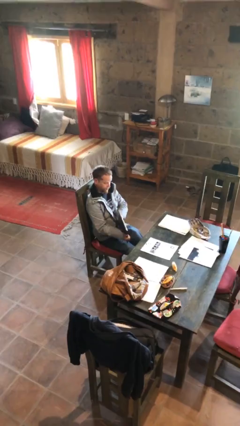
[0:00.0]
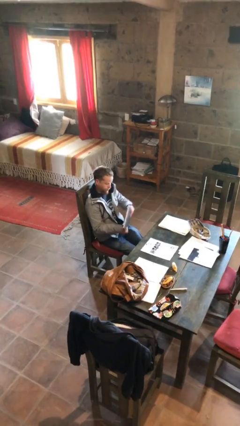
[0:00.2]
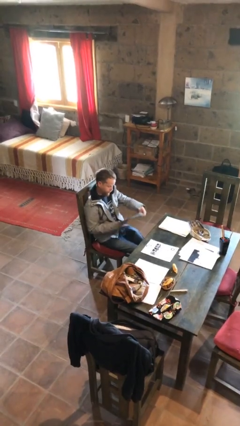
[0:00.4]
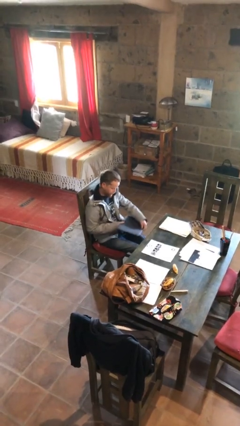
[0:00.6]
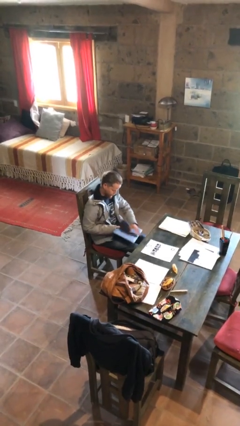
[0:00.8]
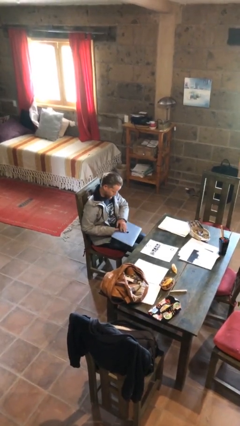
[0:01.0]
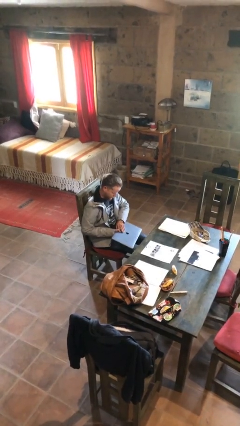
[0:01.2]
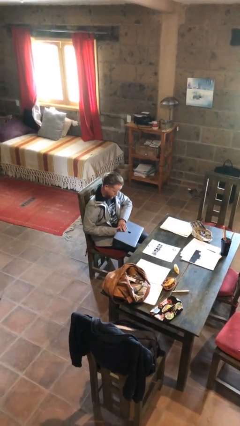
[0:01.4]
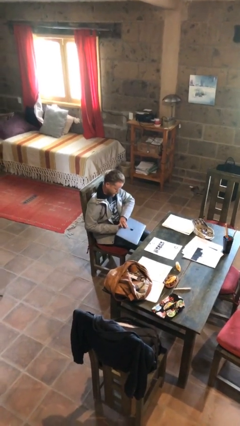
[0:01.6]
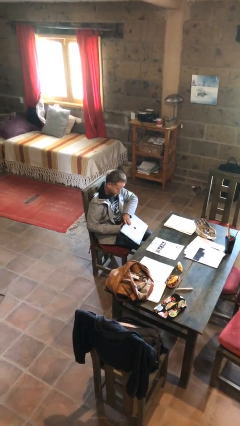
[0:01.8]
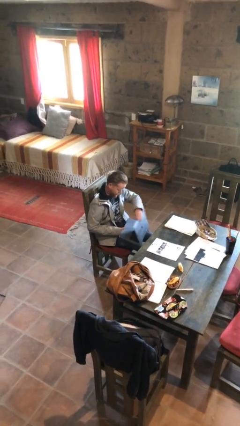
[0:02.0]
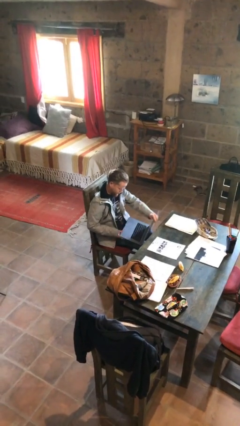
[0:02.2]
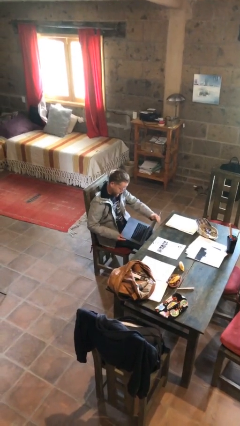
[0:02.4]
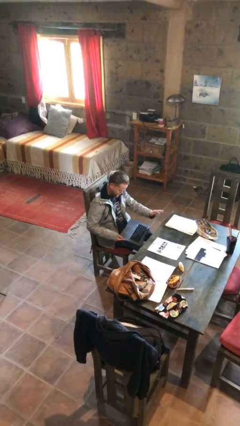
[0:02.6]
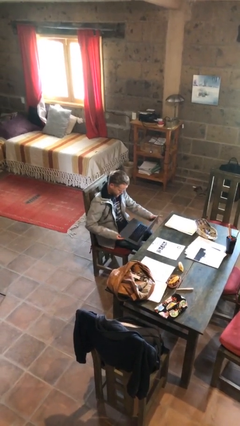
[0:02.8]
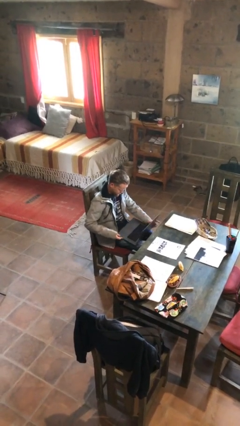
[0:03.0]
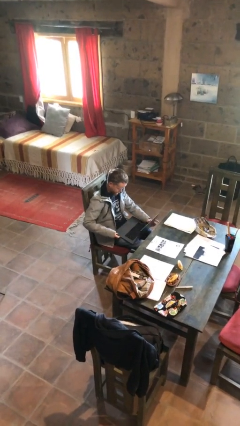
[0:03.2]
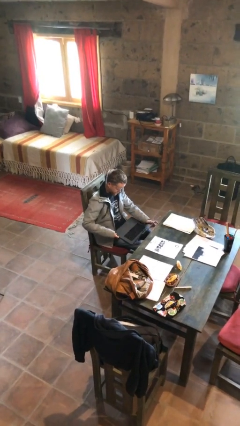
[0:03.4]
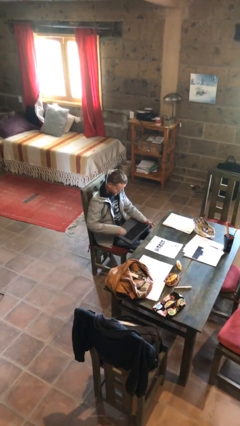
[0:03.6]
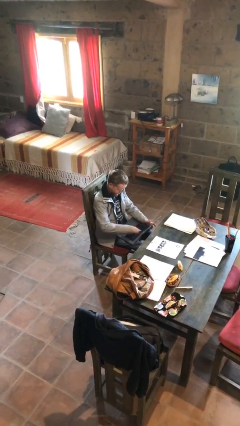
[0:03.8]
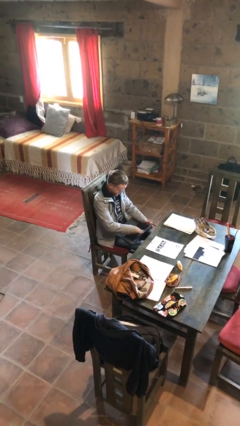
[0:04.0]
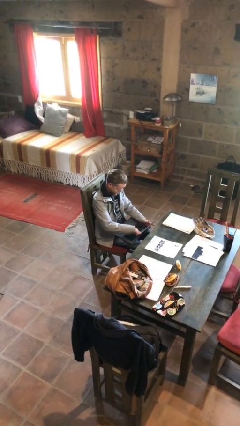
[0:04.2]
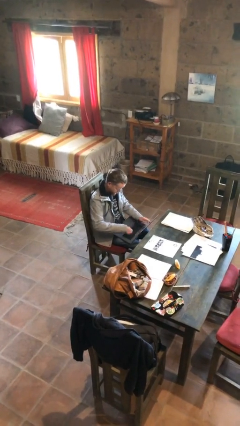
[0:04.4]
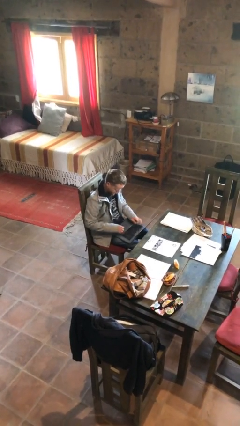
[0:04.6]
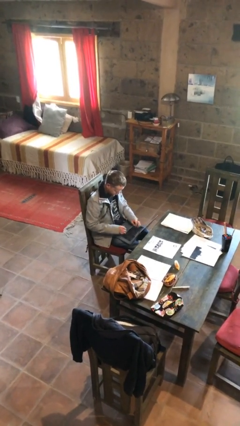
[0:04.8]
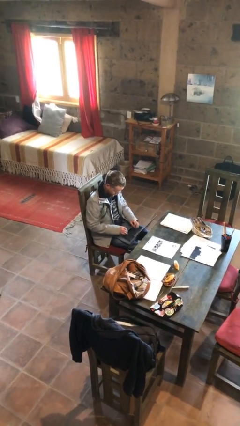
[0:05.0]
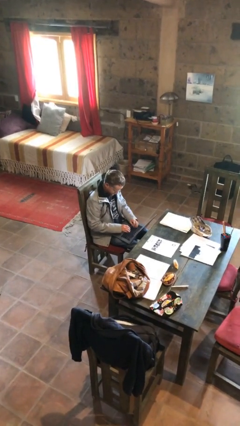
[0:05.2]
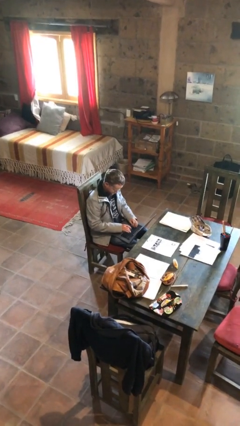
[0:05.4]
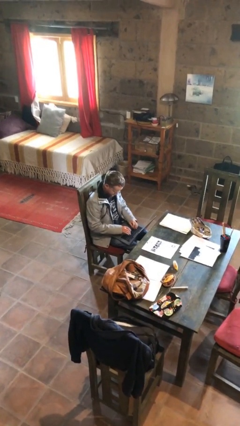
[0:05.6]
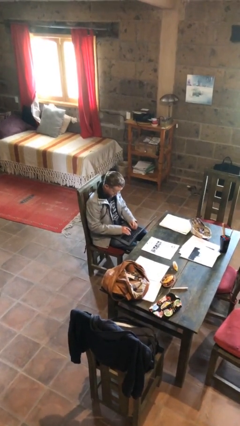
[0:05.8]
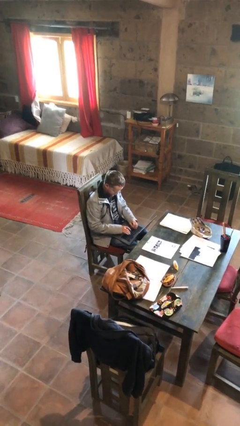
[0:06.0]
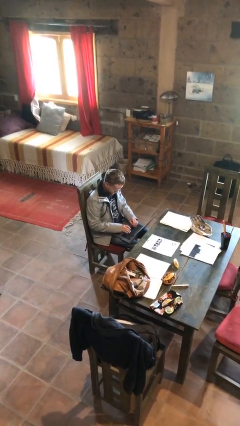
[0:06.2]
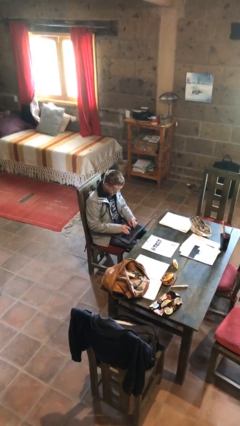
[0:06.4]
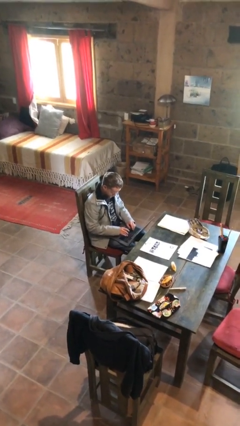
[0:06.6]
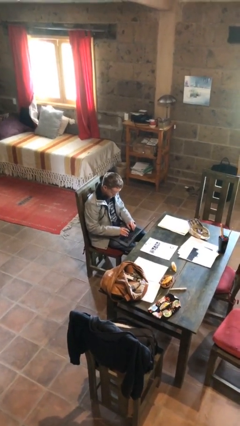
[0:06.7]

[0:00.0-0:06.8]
person interacts with laptop

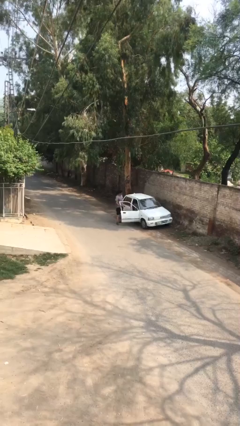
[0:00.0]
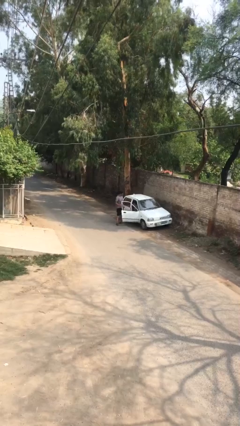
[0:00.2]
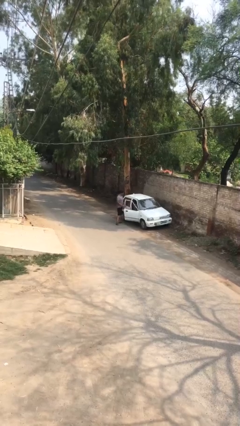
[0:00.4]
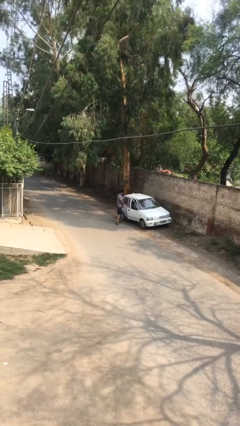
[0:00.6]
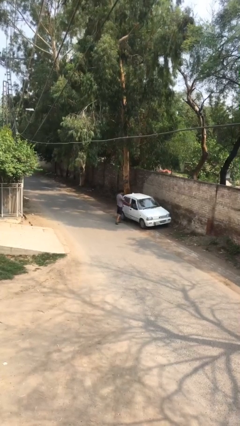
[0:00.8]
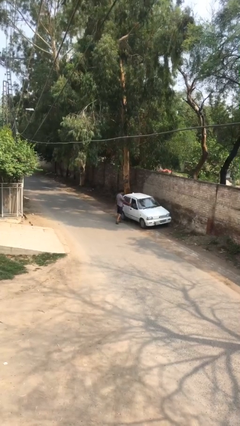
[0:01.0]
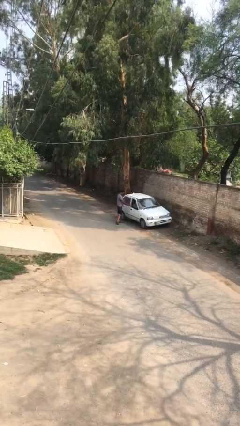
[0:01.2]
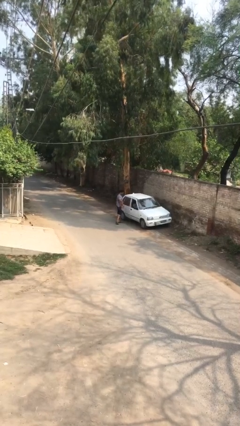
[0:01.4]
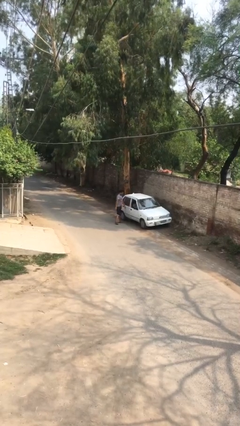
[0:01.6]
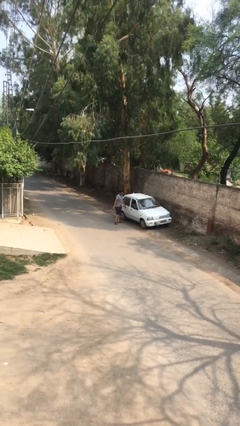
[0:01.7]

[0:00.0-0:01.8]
person closes car door

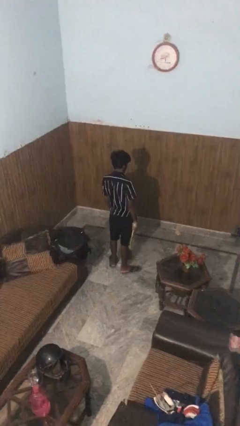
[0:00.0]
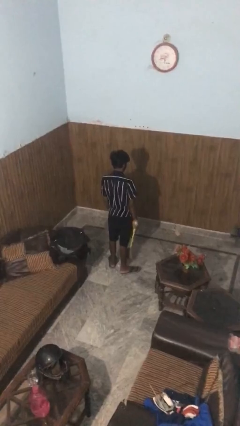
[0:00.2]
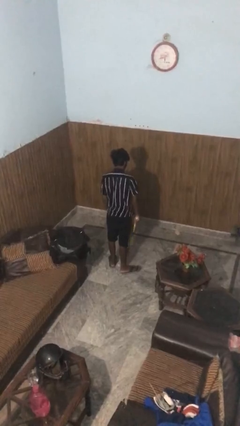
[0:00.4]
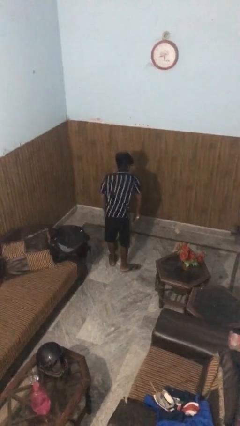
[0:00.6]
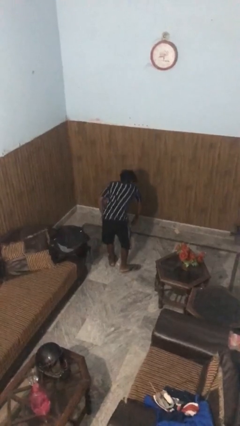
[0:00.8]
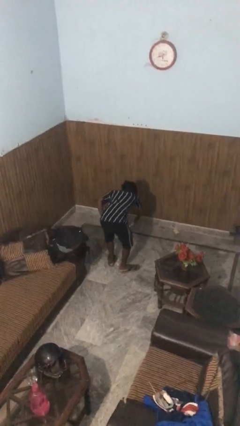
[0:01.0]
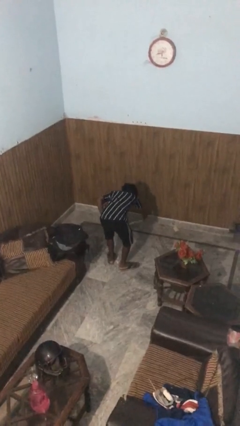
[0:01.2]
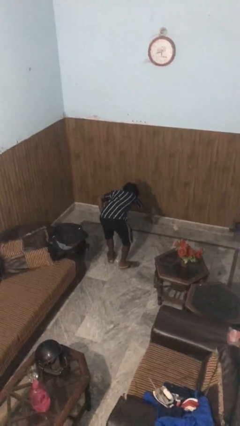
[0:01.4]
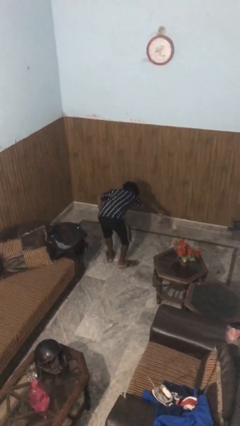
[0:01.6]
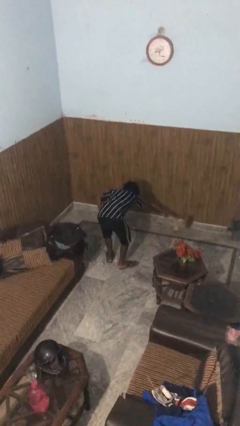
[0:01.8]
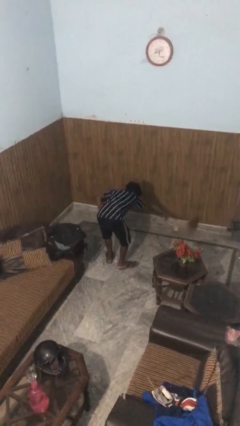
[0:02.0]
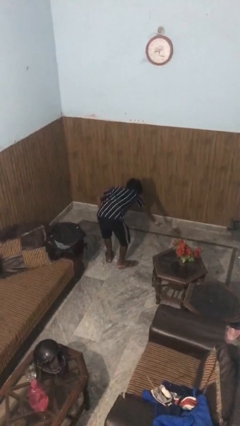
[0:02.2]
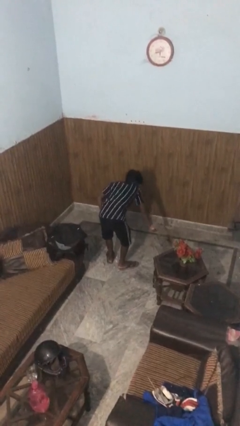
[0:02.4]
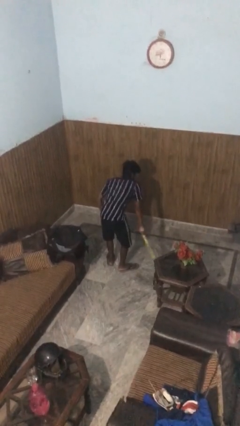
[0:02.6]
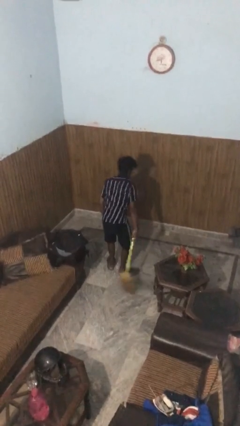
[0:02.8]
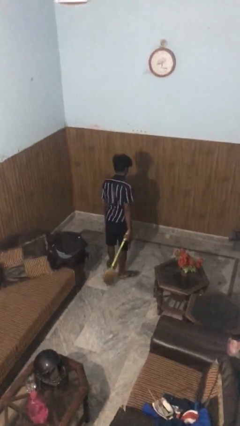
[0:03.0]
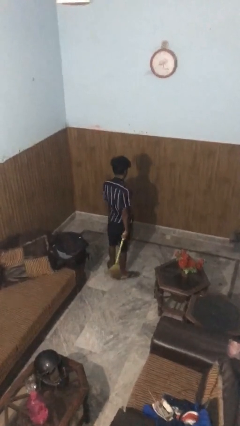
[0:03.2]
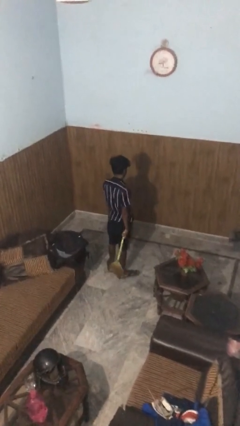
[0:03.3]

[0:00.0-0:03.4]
person sweeps floor

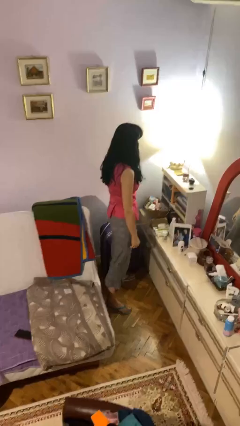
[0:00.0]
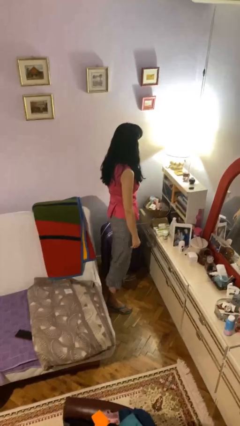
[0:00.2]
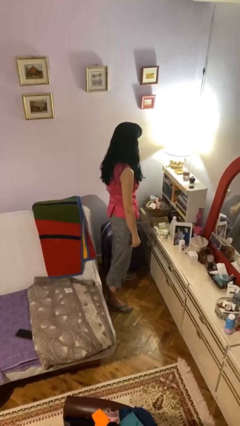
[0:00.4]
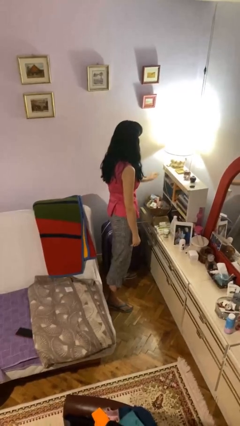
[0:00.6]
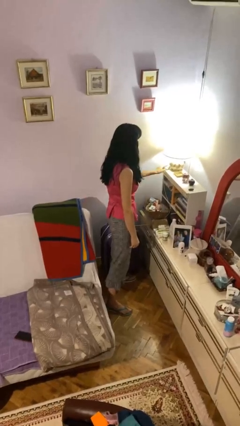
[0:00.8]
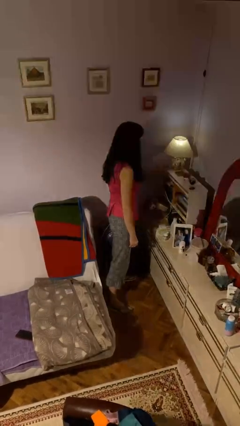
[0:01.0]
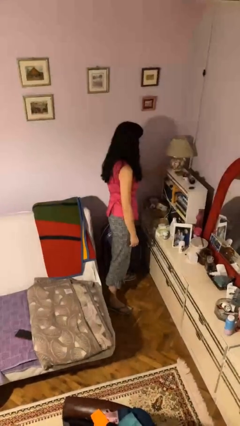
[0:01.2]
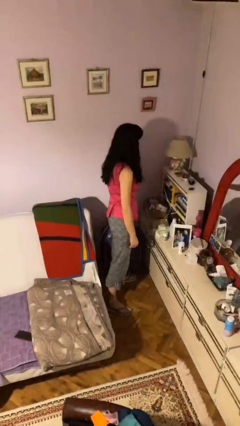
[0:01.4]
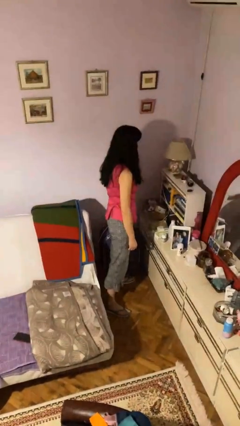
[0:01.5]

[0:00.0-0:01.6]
person turns off lamp

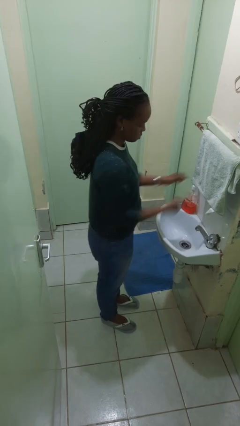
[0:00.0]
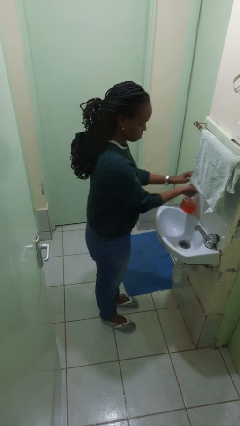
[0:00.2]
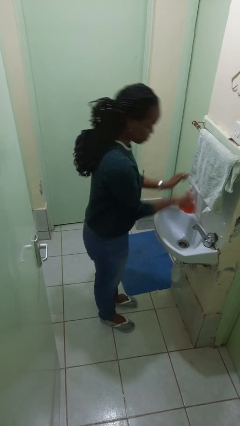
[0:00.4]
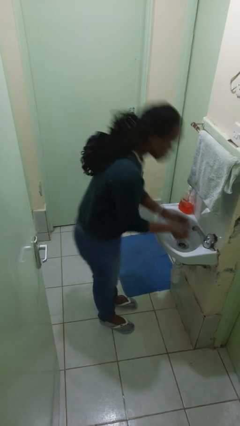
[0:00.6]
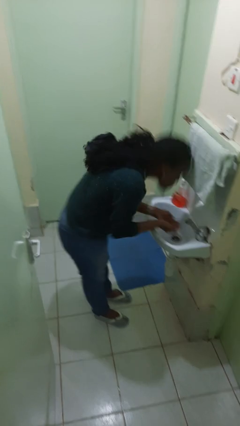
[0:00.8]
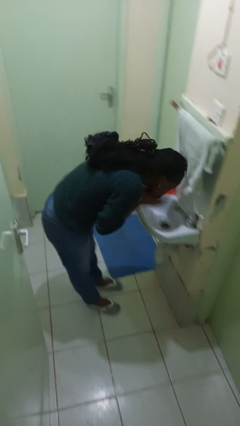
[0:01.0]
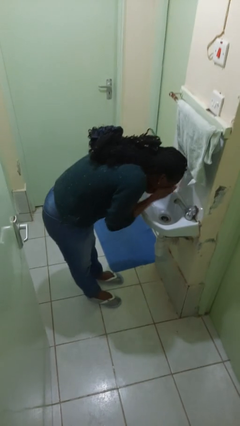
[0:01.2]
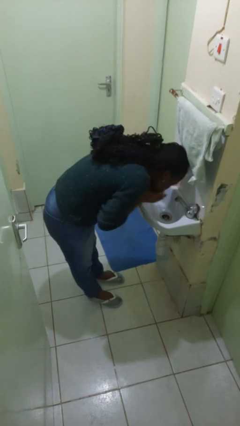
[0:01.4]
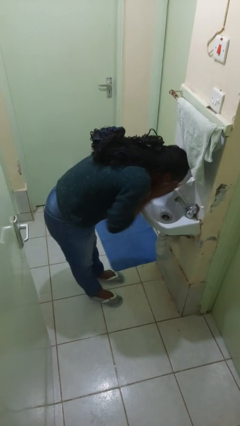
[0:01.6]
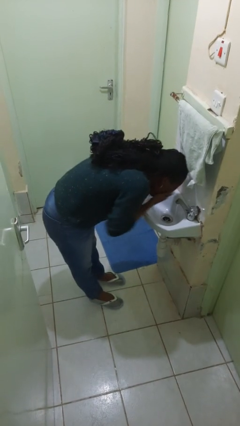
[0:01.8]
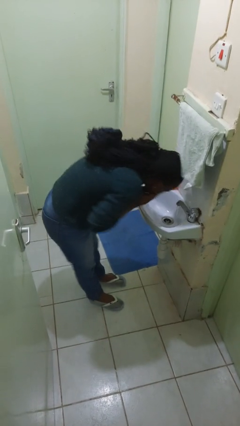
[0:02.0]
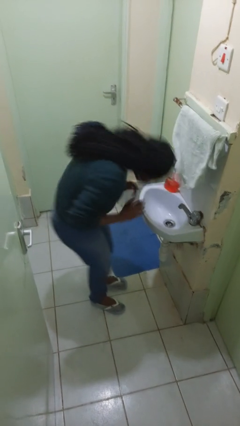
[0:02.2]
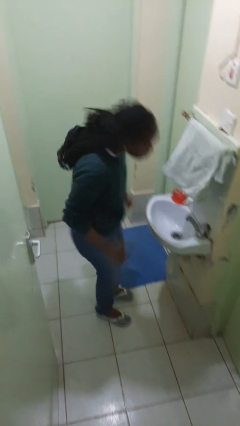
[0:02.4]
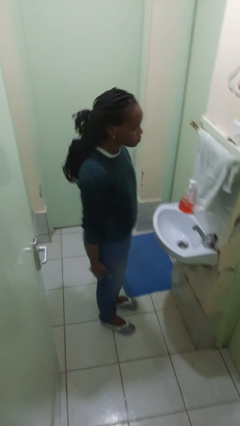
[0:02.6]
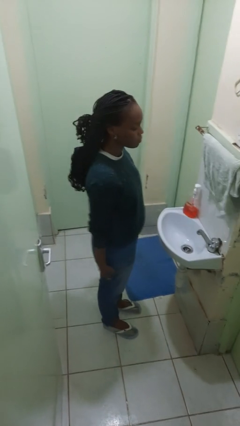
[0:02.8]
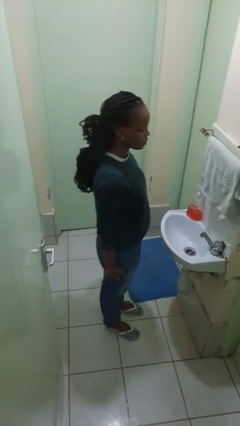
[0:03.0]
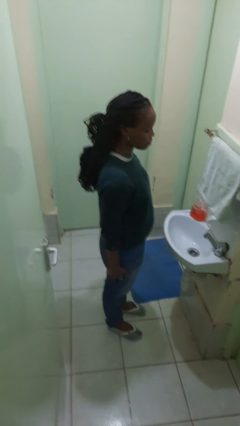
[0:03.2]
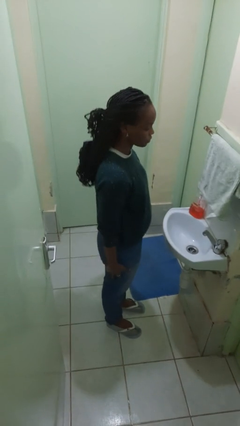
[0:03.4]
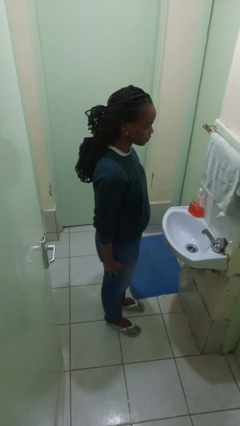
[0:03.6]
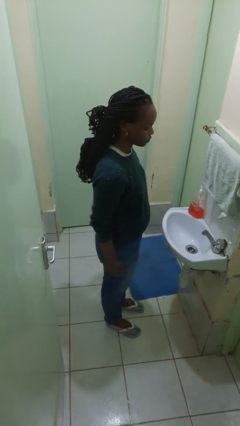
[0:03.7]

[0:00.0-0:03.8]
person washes face
